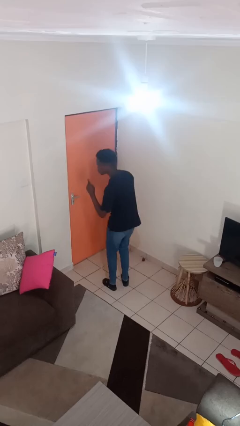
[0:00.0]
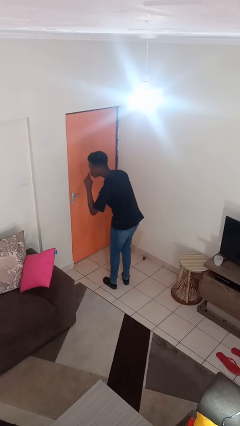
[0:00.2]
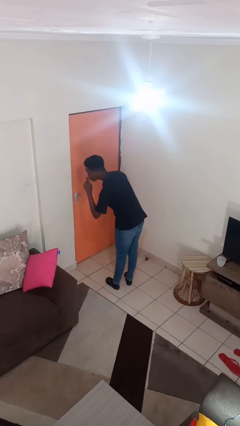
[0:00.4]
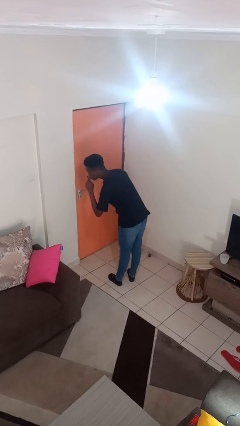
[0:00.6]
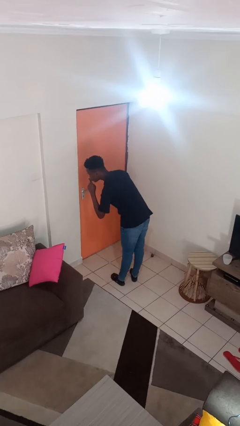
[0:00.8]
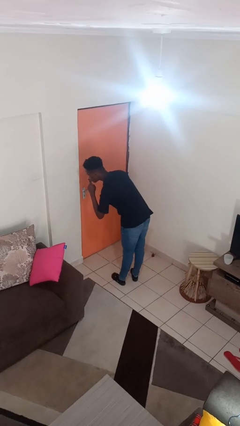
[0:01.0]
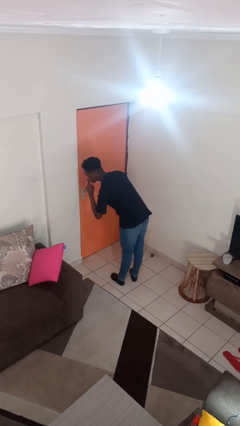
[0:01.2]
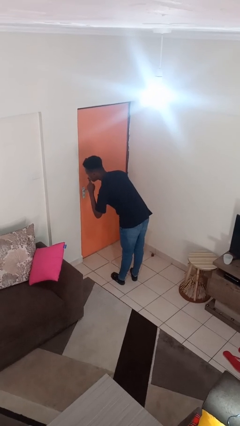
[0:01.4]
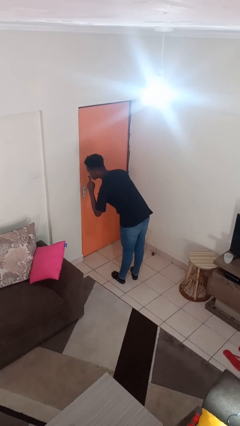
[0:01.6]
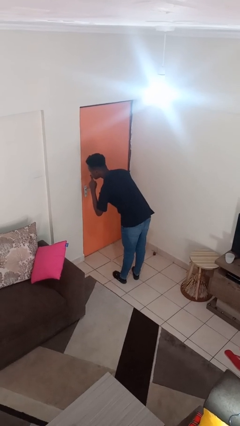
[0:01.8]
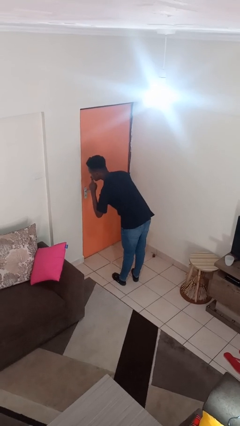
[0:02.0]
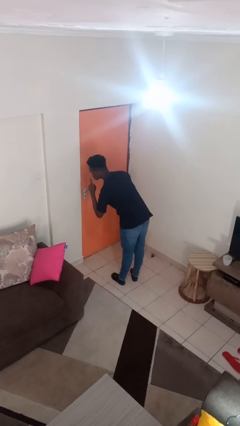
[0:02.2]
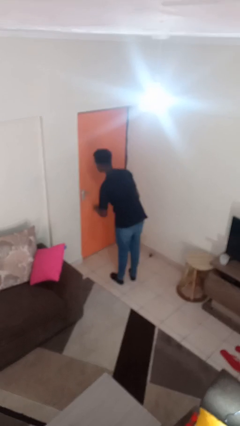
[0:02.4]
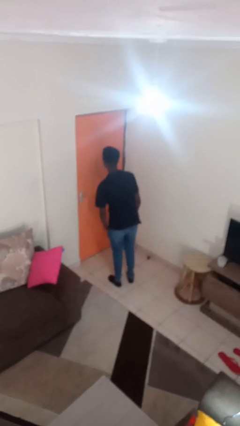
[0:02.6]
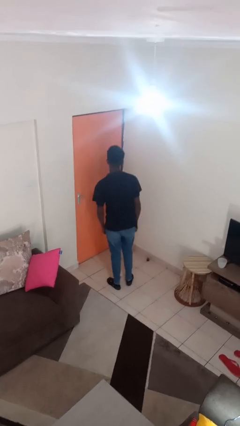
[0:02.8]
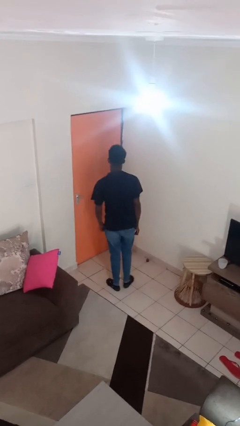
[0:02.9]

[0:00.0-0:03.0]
person gestures be quiet

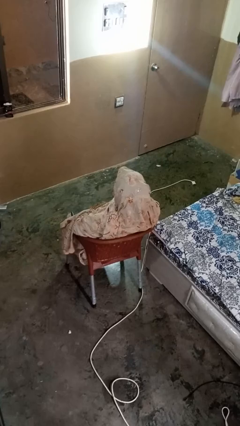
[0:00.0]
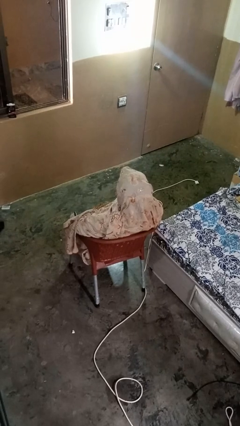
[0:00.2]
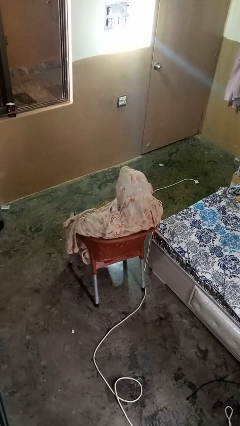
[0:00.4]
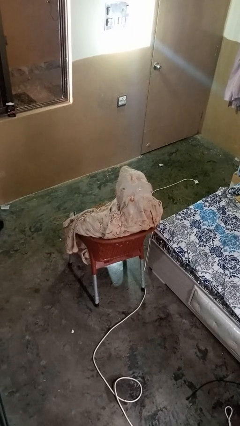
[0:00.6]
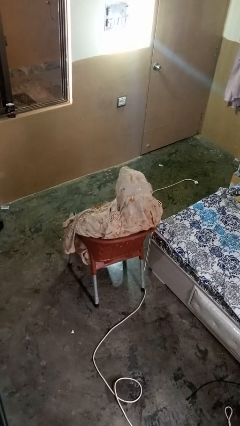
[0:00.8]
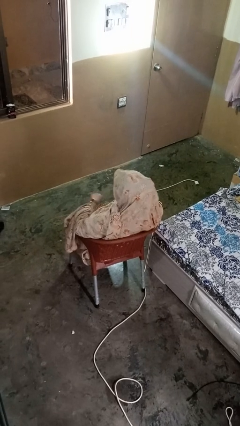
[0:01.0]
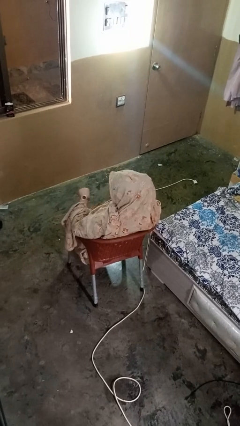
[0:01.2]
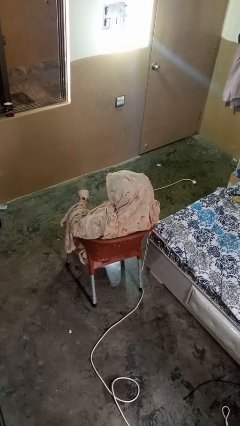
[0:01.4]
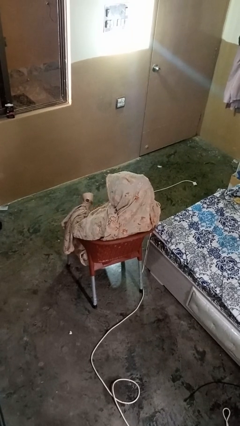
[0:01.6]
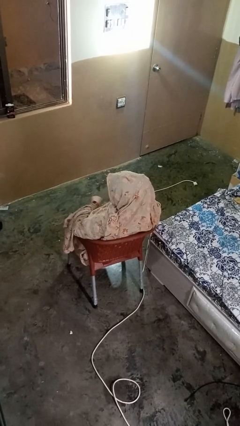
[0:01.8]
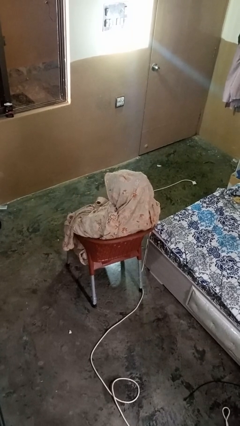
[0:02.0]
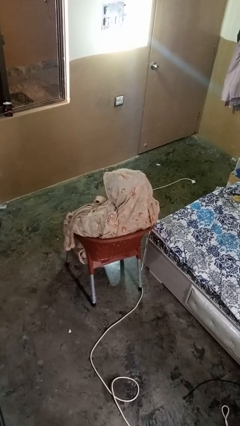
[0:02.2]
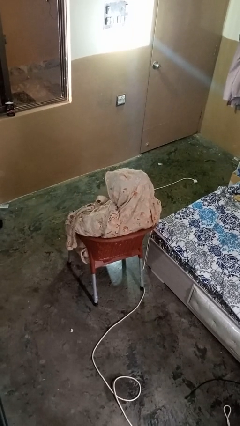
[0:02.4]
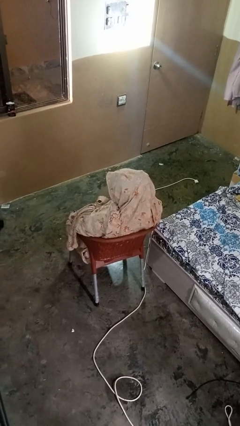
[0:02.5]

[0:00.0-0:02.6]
person looks at wristwatch

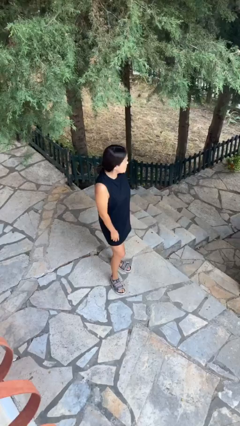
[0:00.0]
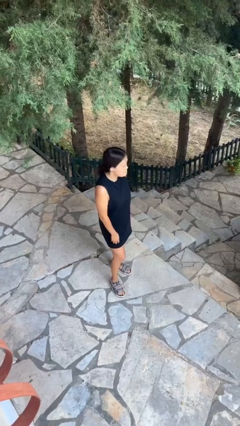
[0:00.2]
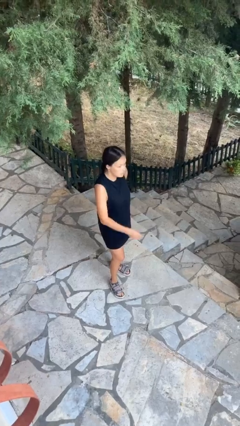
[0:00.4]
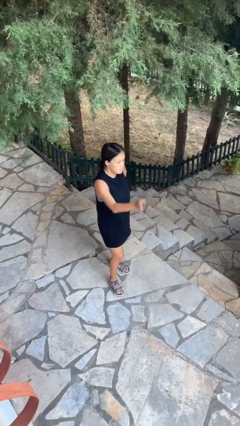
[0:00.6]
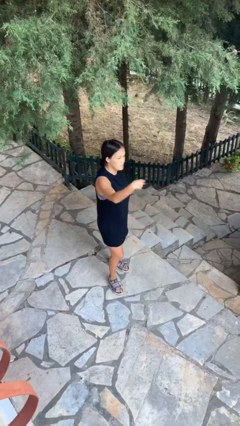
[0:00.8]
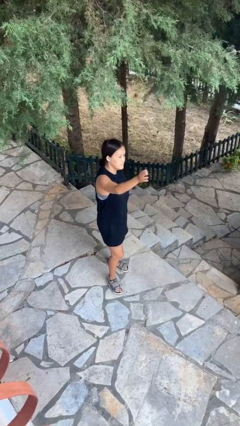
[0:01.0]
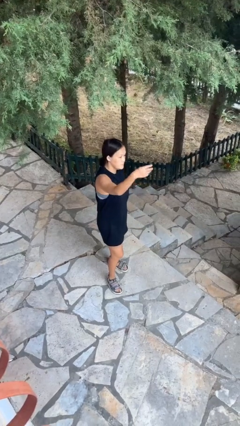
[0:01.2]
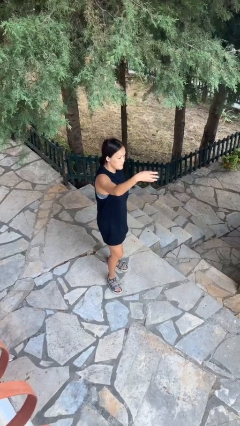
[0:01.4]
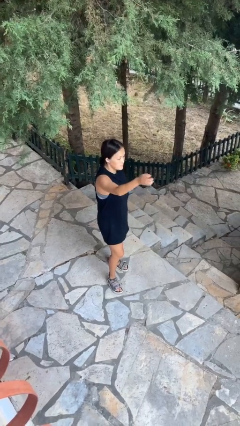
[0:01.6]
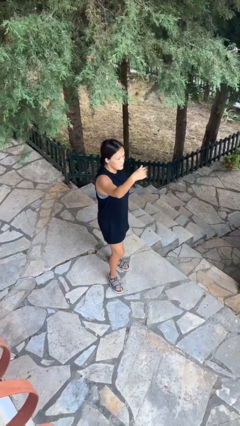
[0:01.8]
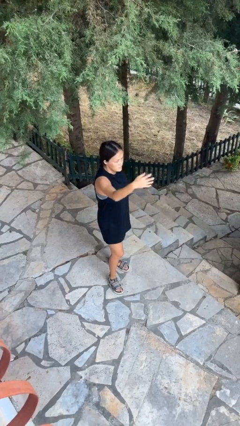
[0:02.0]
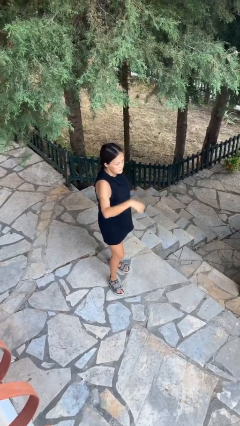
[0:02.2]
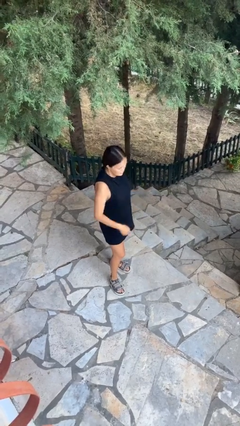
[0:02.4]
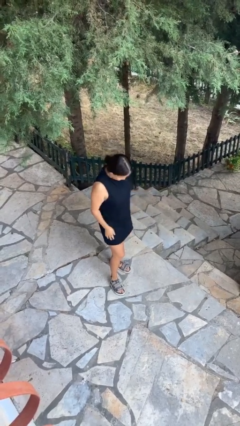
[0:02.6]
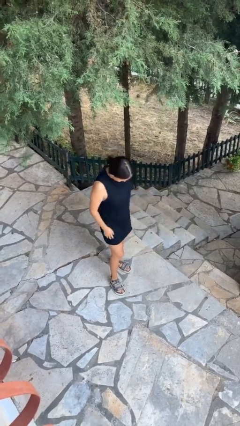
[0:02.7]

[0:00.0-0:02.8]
person gestures come here

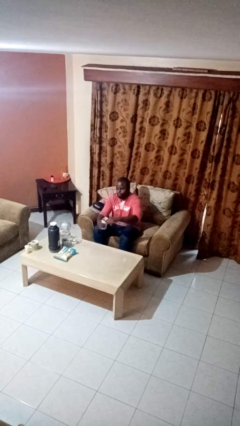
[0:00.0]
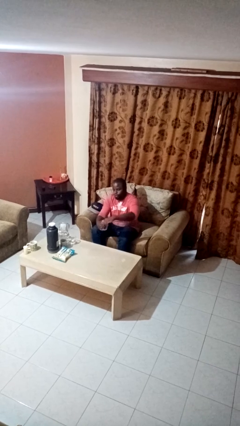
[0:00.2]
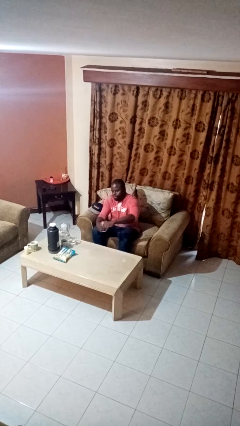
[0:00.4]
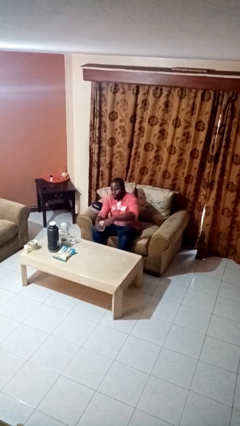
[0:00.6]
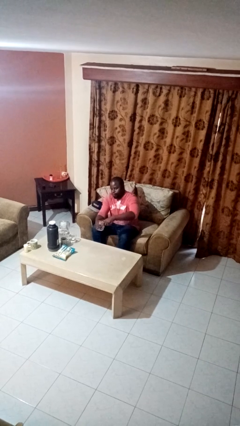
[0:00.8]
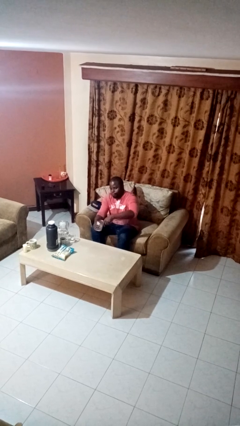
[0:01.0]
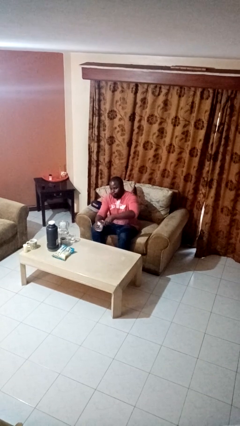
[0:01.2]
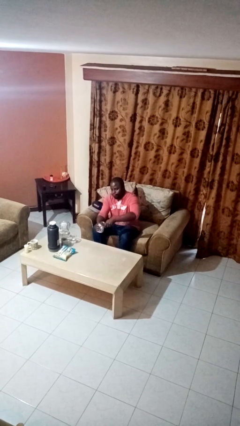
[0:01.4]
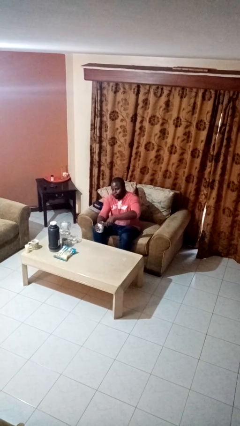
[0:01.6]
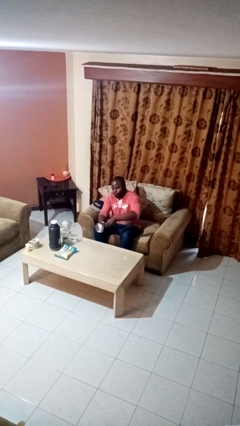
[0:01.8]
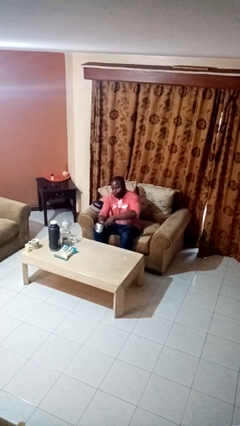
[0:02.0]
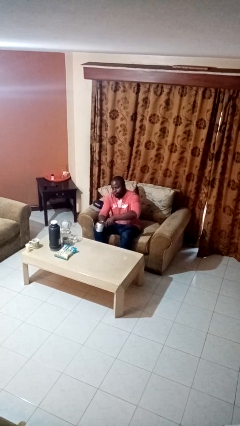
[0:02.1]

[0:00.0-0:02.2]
person opens can with can opener

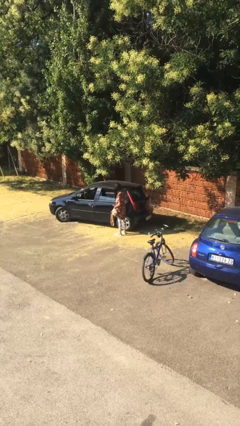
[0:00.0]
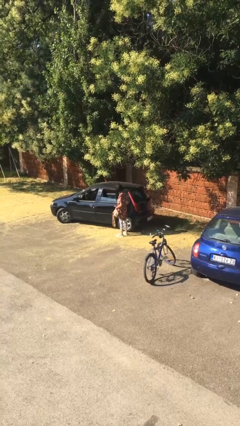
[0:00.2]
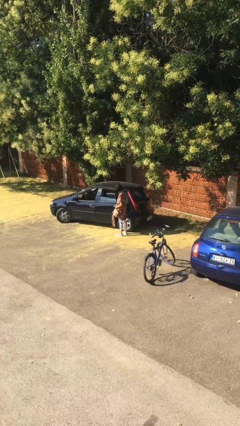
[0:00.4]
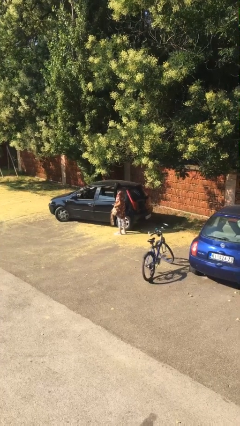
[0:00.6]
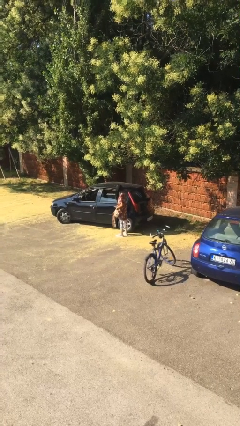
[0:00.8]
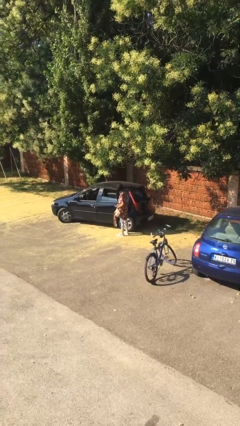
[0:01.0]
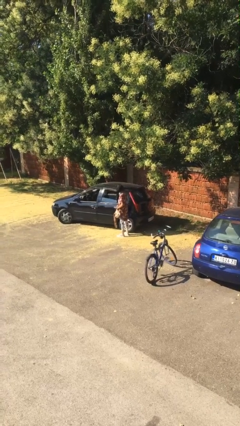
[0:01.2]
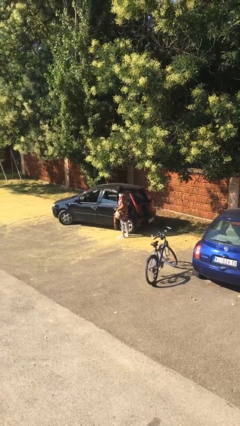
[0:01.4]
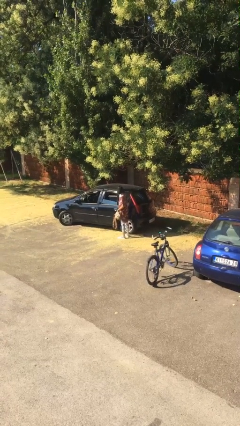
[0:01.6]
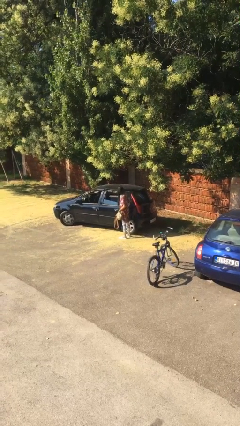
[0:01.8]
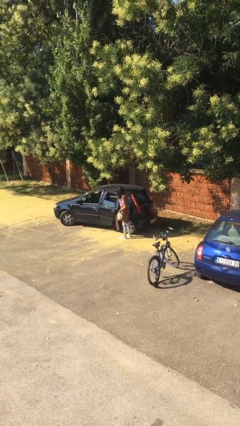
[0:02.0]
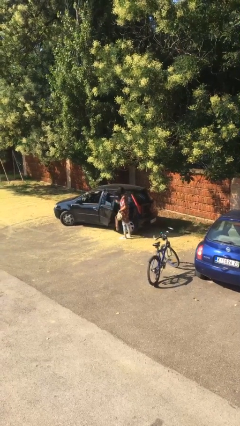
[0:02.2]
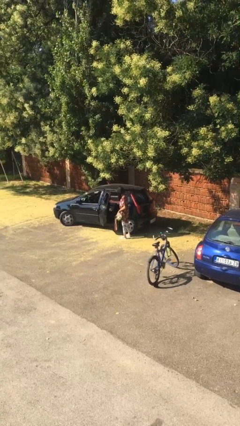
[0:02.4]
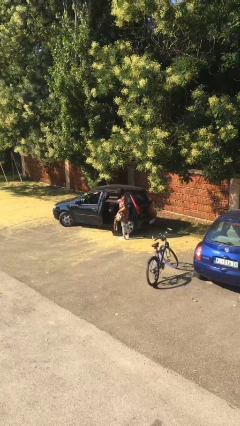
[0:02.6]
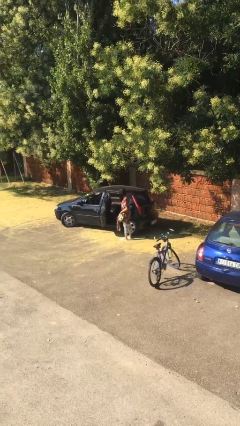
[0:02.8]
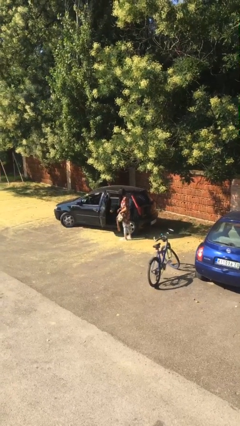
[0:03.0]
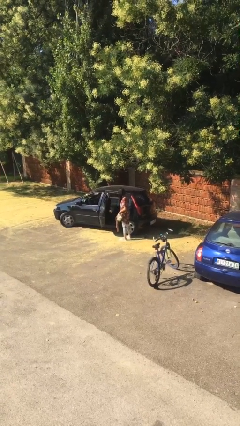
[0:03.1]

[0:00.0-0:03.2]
person opens car door

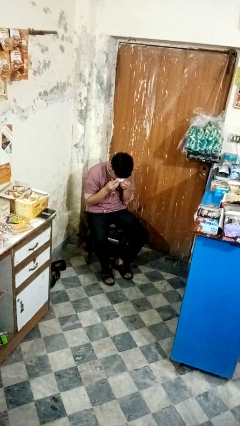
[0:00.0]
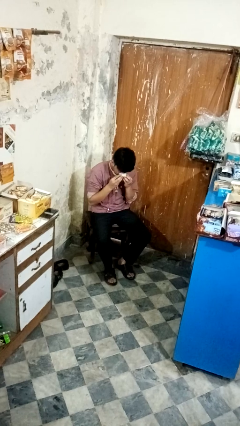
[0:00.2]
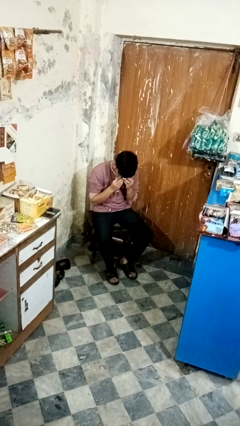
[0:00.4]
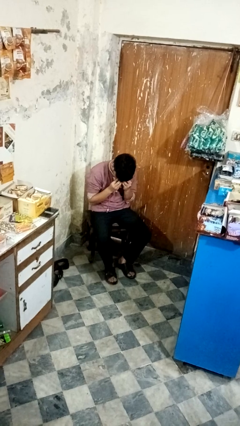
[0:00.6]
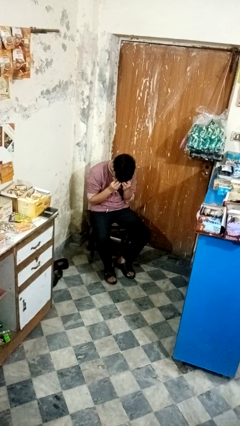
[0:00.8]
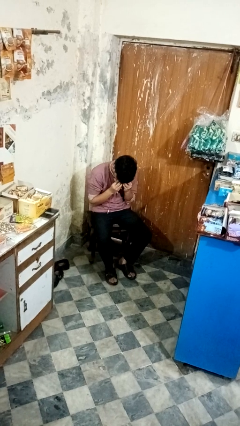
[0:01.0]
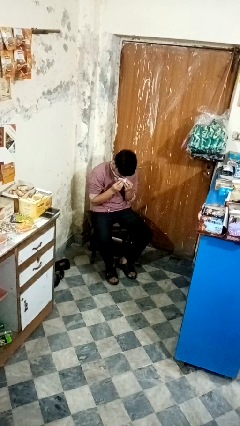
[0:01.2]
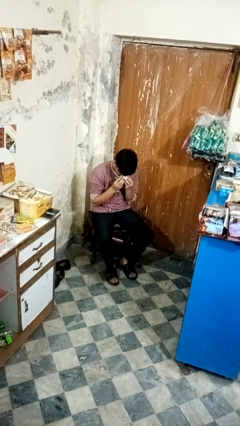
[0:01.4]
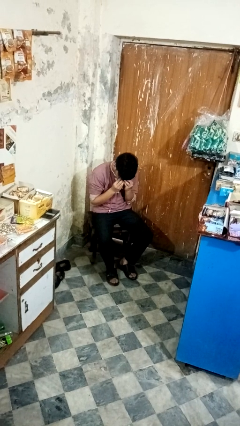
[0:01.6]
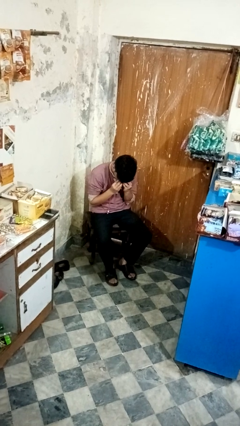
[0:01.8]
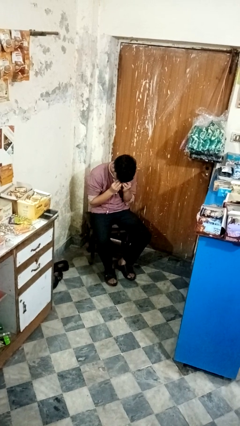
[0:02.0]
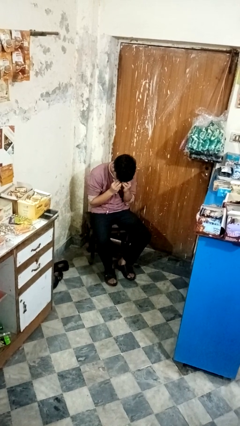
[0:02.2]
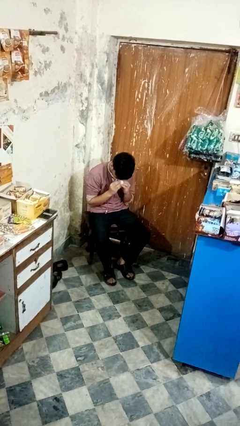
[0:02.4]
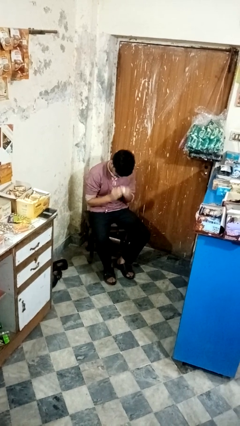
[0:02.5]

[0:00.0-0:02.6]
person blows nose

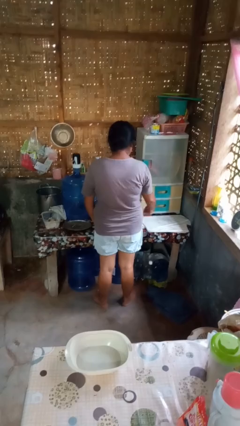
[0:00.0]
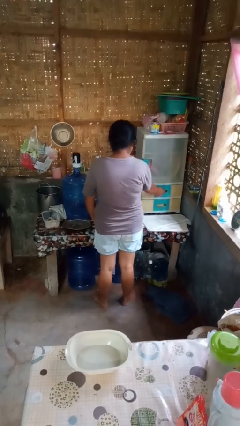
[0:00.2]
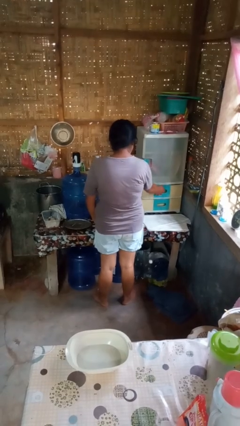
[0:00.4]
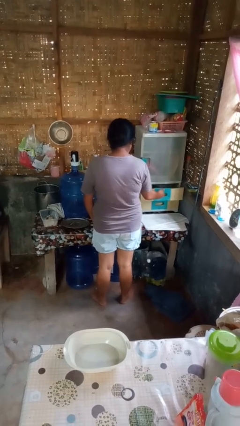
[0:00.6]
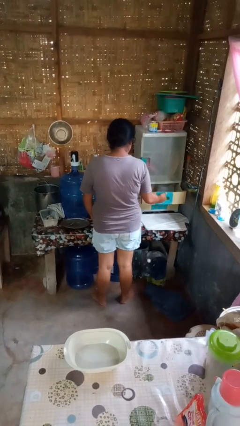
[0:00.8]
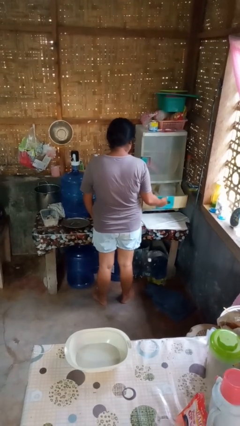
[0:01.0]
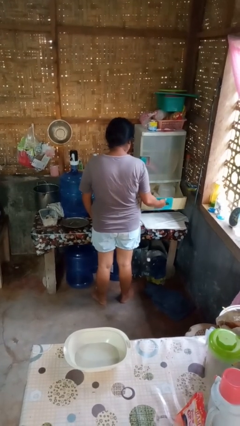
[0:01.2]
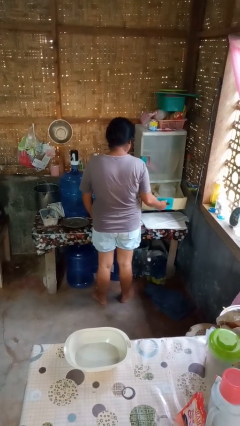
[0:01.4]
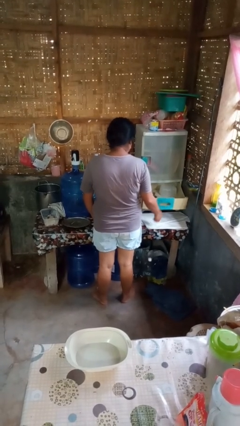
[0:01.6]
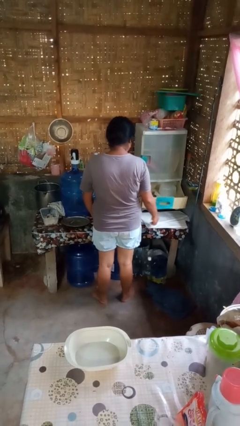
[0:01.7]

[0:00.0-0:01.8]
person opens kitchen drawer
